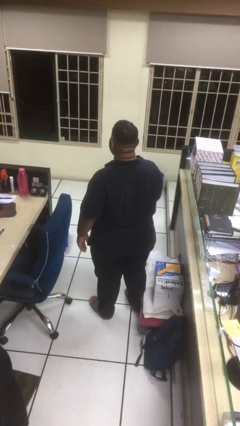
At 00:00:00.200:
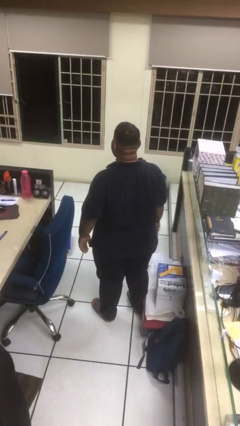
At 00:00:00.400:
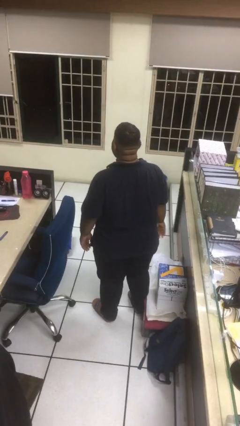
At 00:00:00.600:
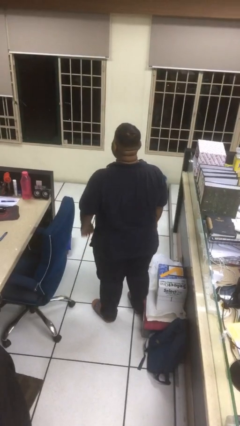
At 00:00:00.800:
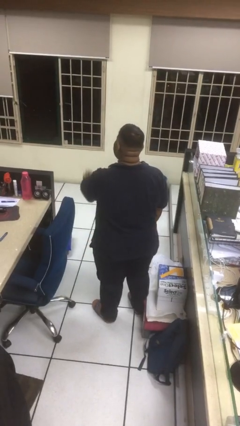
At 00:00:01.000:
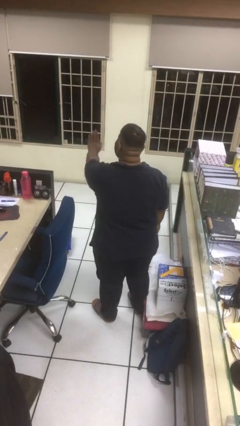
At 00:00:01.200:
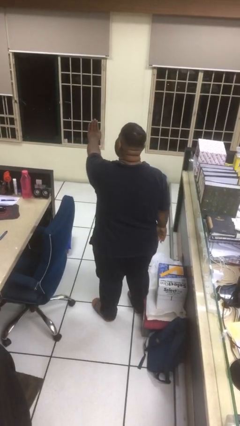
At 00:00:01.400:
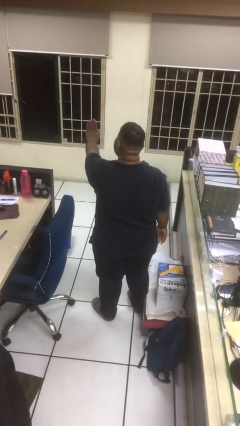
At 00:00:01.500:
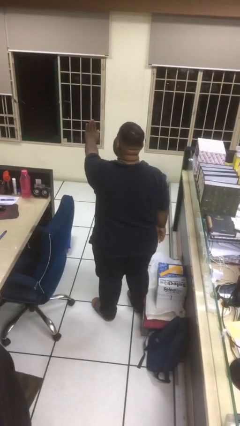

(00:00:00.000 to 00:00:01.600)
person gestures stop

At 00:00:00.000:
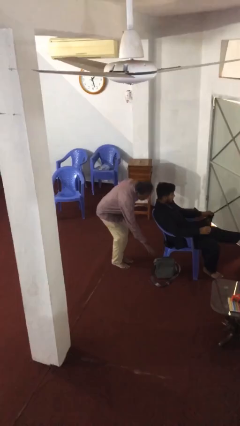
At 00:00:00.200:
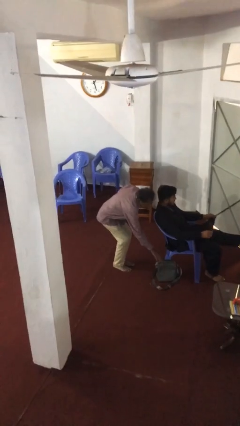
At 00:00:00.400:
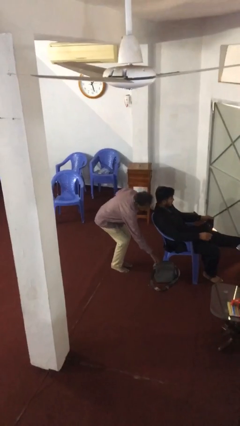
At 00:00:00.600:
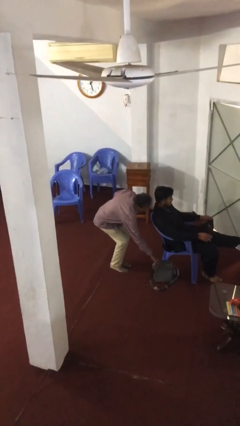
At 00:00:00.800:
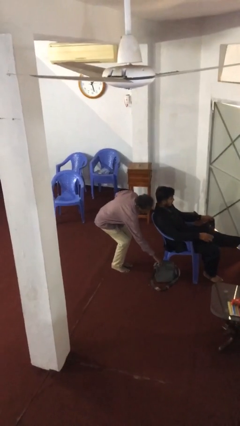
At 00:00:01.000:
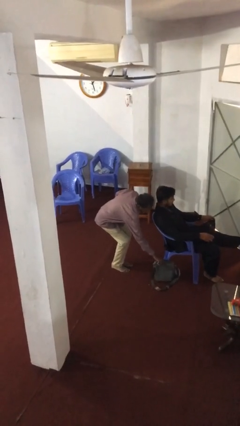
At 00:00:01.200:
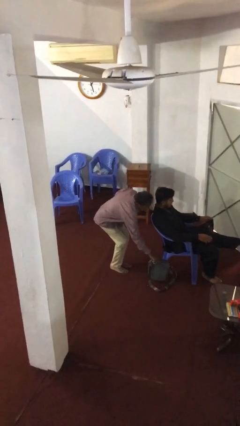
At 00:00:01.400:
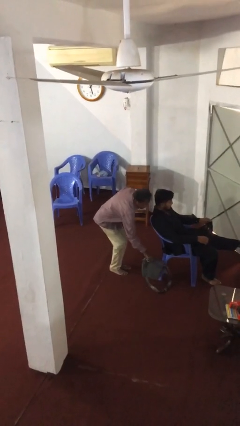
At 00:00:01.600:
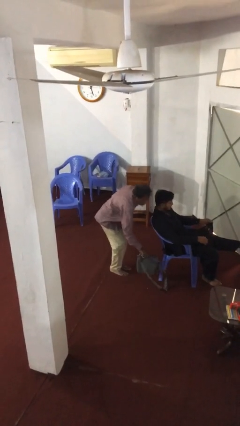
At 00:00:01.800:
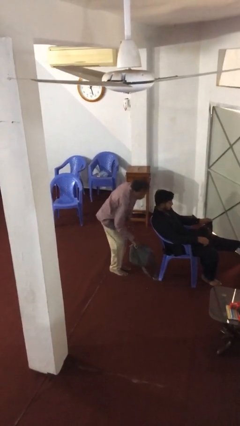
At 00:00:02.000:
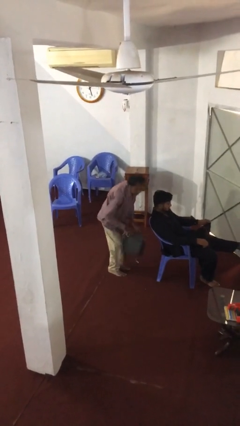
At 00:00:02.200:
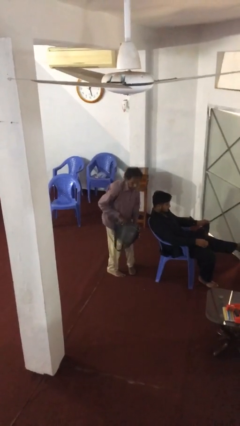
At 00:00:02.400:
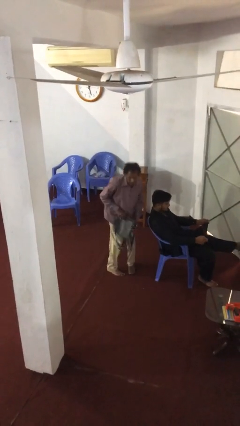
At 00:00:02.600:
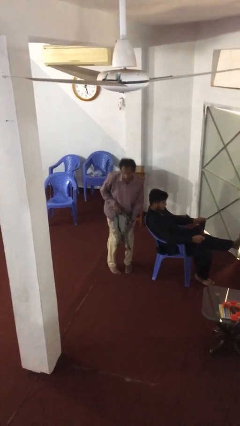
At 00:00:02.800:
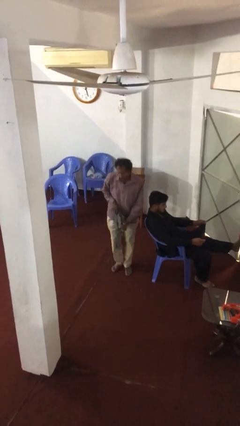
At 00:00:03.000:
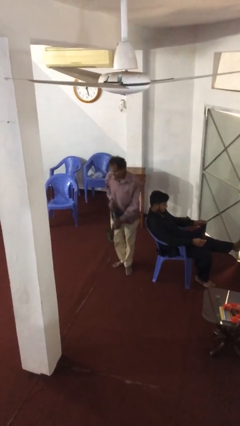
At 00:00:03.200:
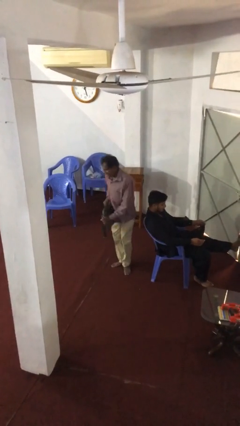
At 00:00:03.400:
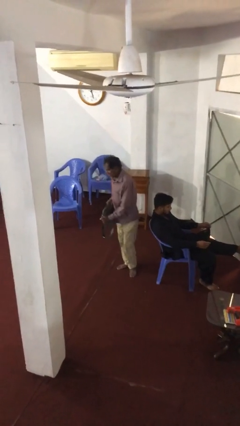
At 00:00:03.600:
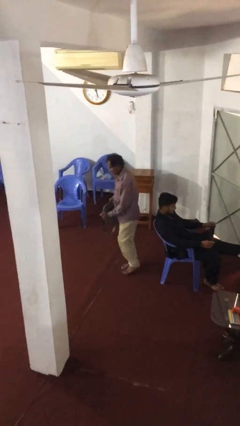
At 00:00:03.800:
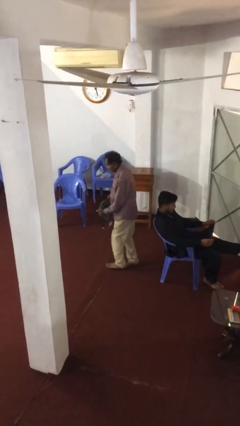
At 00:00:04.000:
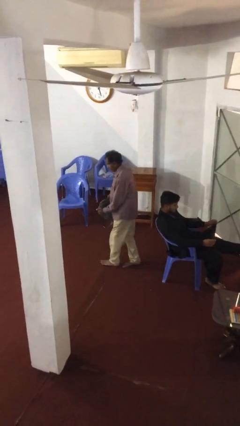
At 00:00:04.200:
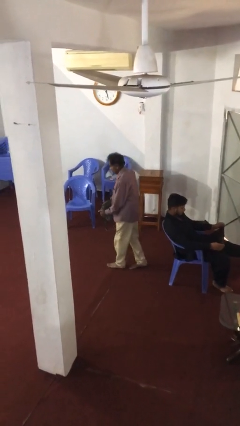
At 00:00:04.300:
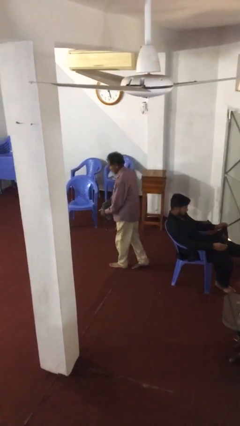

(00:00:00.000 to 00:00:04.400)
person steals object from person

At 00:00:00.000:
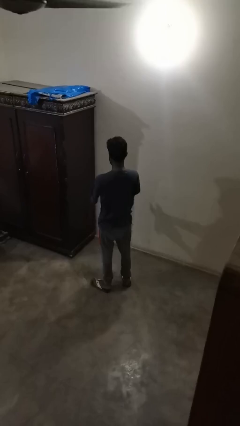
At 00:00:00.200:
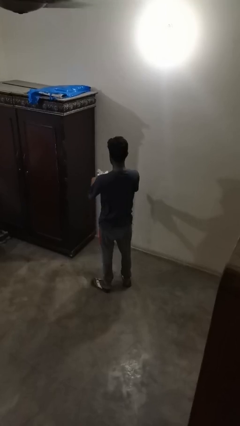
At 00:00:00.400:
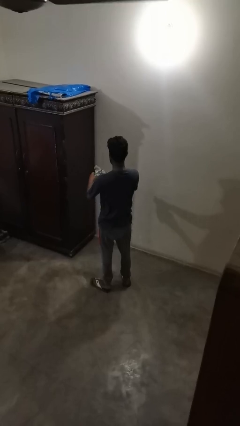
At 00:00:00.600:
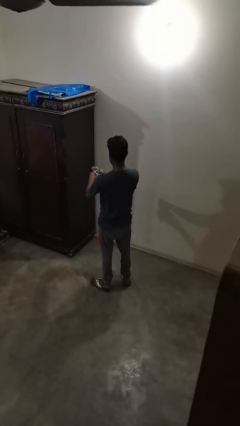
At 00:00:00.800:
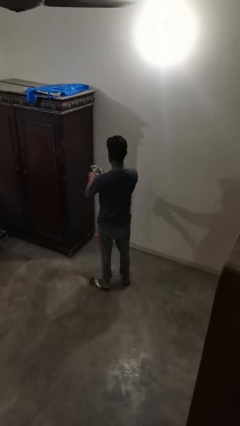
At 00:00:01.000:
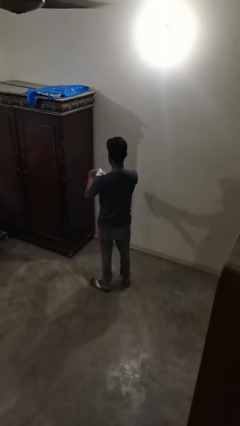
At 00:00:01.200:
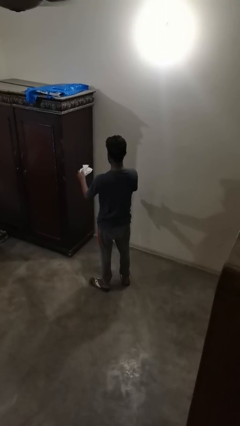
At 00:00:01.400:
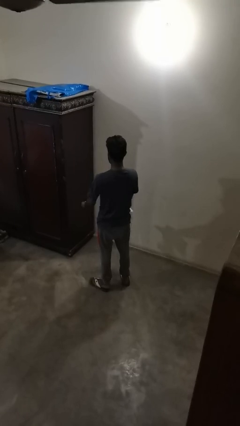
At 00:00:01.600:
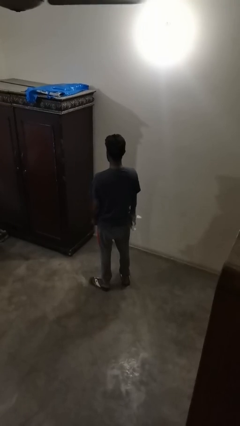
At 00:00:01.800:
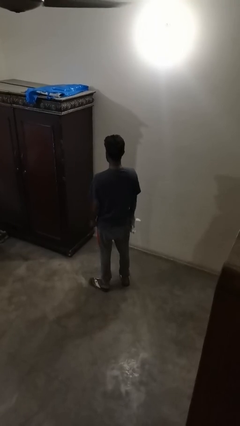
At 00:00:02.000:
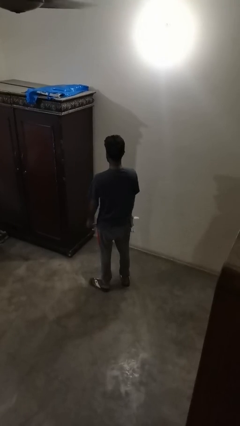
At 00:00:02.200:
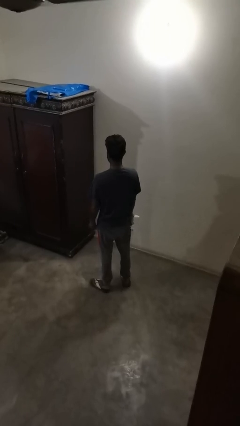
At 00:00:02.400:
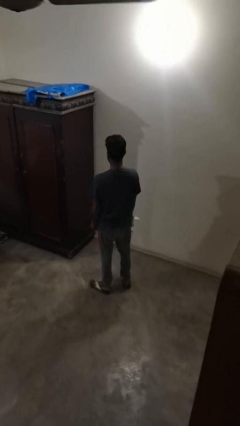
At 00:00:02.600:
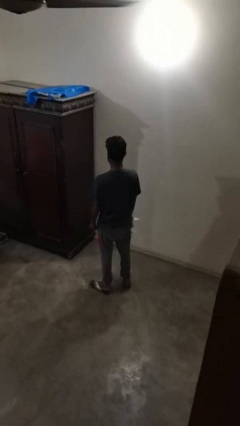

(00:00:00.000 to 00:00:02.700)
person tears paper

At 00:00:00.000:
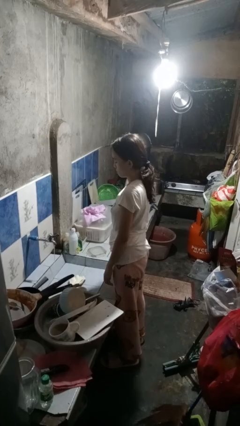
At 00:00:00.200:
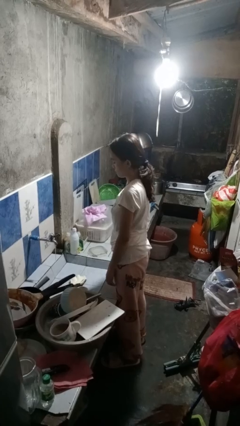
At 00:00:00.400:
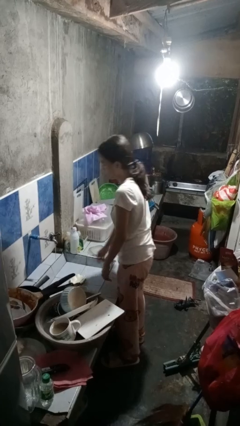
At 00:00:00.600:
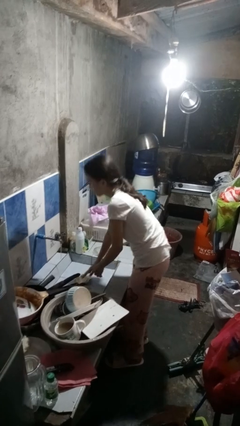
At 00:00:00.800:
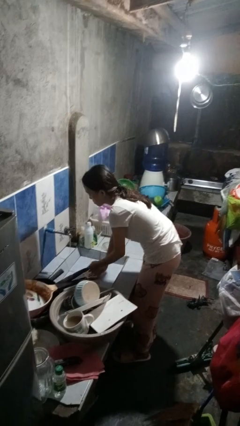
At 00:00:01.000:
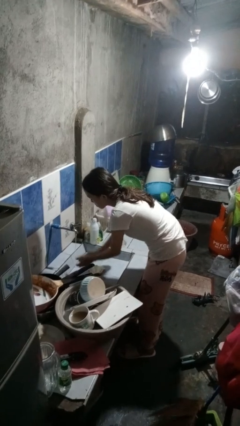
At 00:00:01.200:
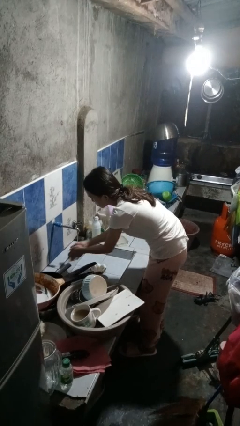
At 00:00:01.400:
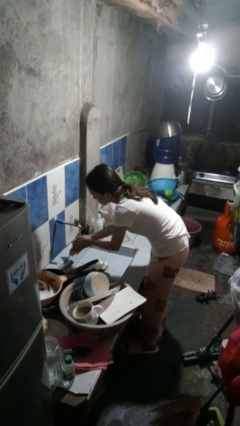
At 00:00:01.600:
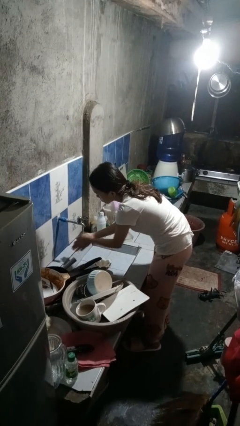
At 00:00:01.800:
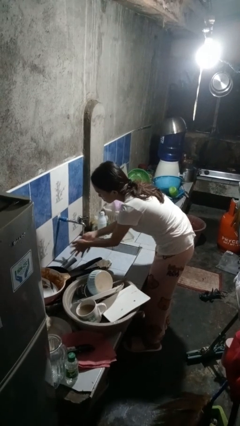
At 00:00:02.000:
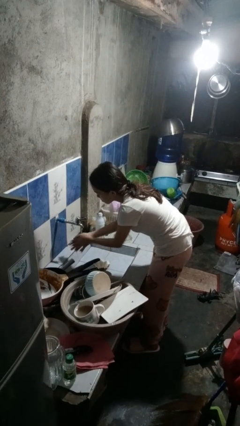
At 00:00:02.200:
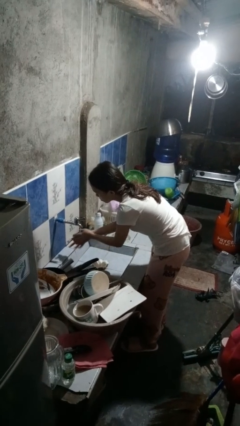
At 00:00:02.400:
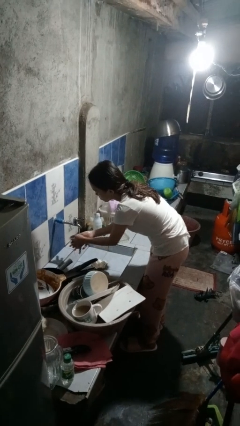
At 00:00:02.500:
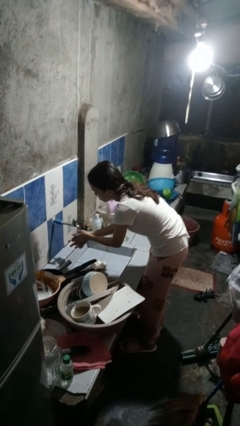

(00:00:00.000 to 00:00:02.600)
person washes hands

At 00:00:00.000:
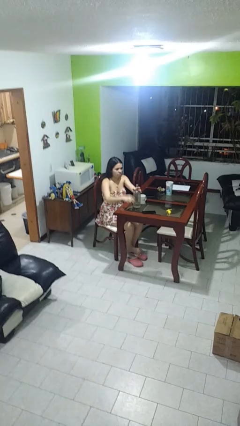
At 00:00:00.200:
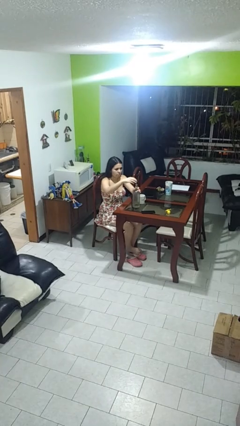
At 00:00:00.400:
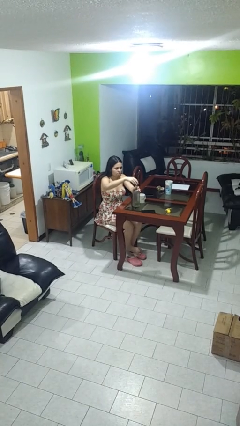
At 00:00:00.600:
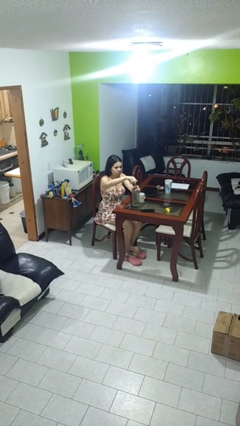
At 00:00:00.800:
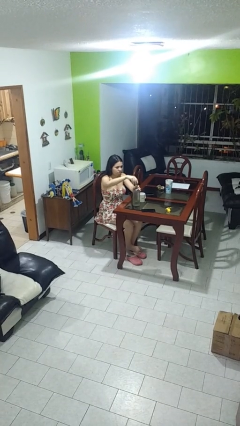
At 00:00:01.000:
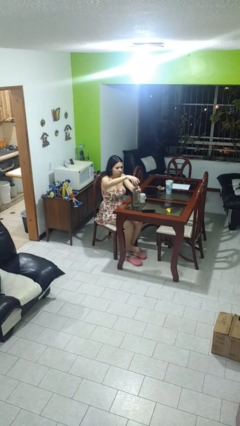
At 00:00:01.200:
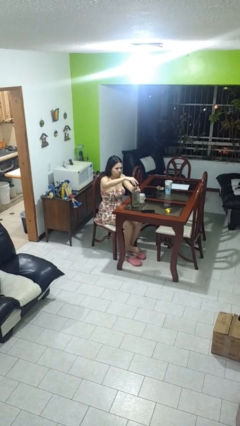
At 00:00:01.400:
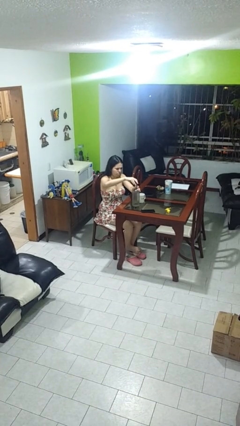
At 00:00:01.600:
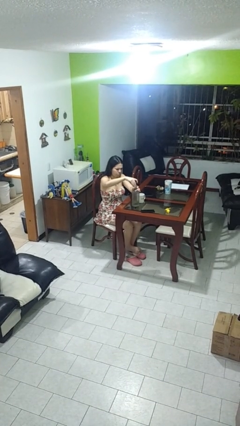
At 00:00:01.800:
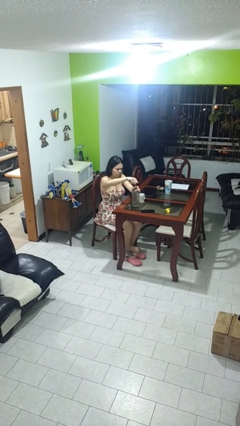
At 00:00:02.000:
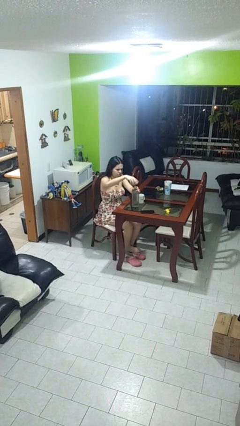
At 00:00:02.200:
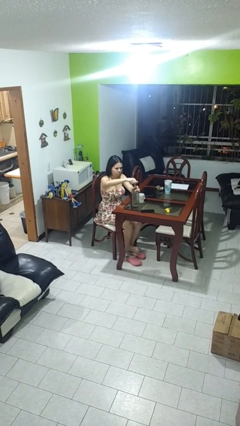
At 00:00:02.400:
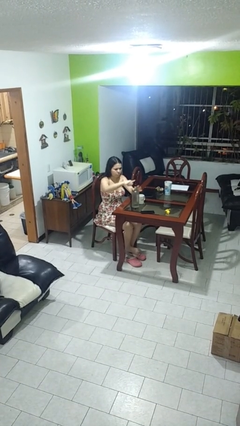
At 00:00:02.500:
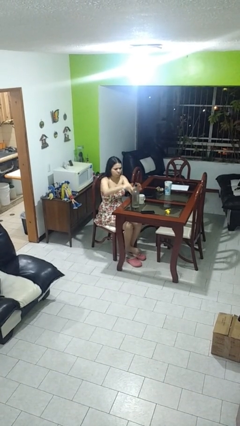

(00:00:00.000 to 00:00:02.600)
person screws lid to bottle

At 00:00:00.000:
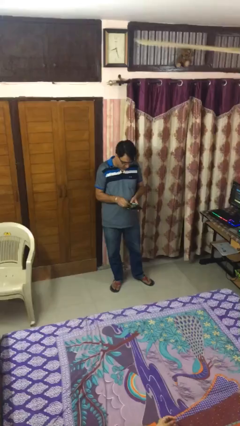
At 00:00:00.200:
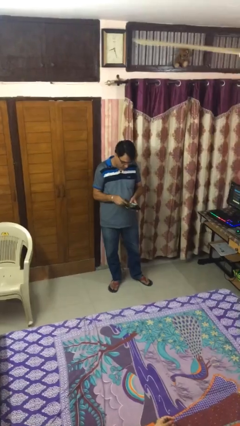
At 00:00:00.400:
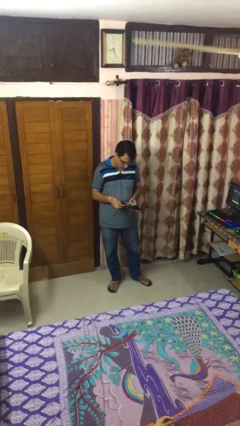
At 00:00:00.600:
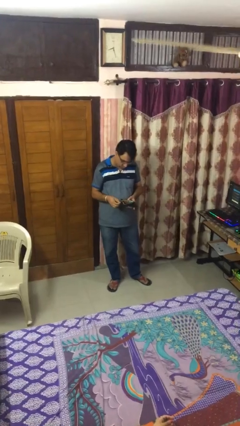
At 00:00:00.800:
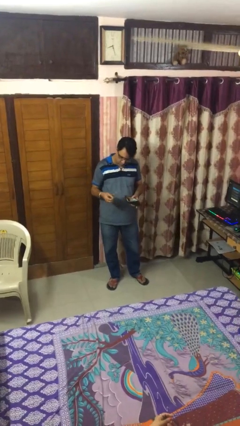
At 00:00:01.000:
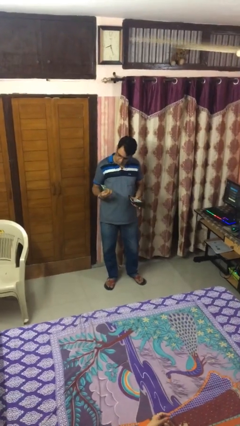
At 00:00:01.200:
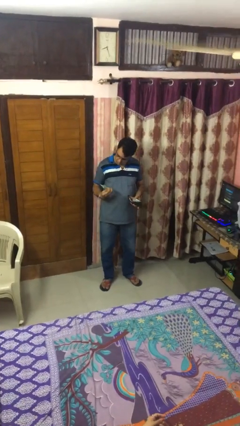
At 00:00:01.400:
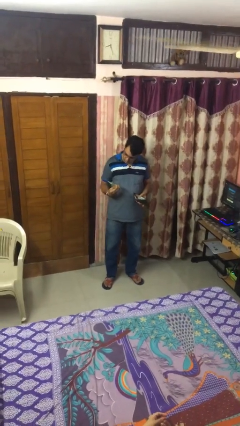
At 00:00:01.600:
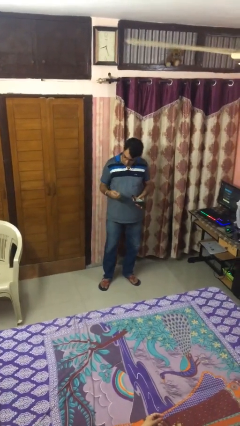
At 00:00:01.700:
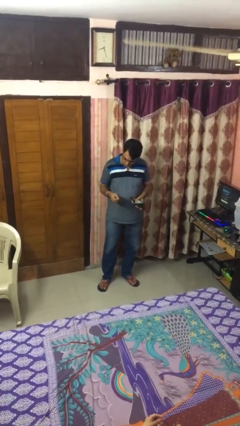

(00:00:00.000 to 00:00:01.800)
person takes object from purse

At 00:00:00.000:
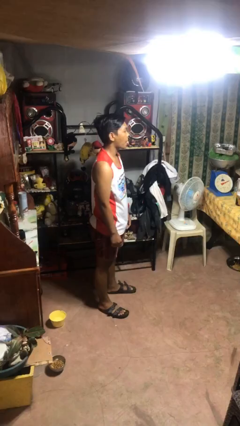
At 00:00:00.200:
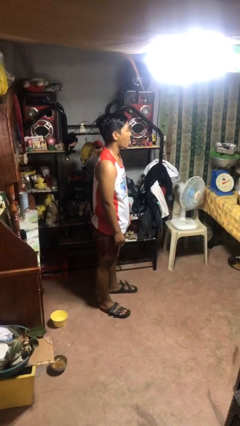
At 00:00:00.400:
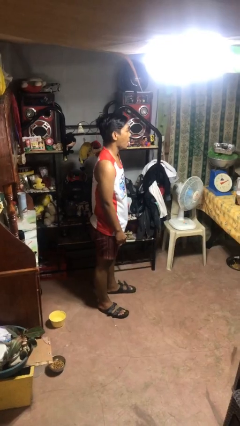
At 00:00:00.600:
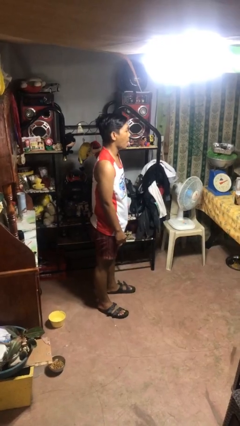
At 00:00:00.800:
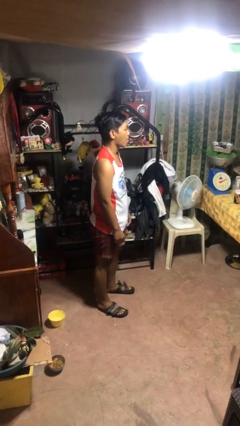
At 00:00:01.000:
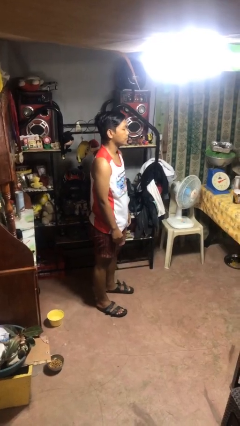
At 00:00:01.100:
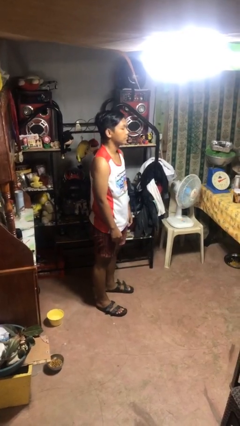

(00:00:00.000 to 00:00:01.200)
person sticks out tongue
